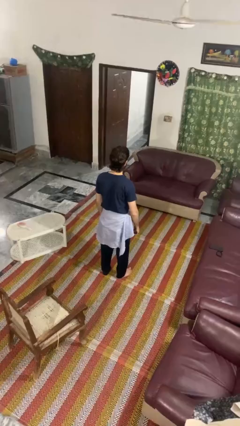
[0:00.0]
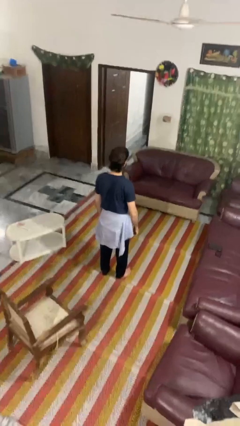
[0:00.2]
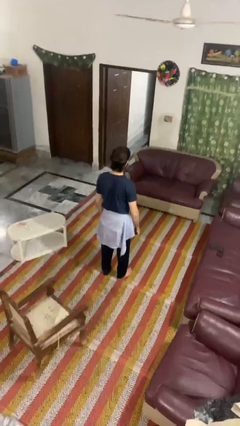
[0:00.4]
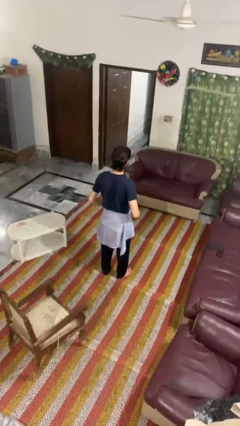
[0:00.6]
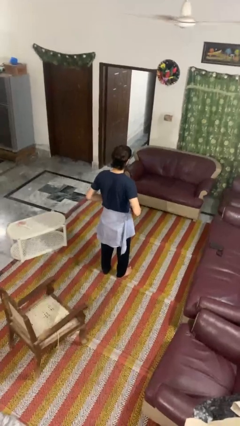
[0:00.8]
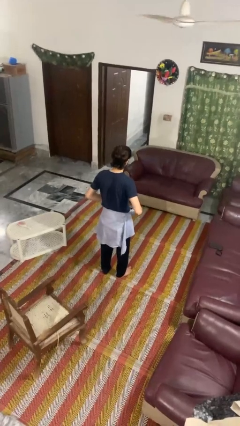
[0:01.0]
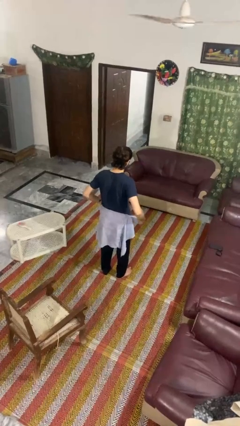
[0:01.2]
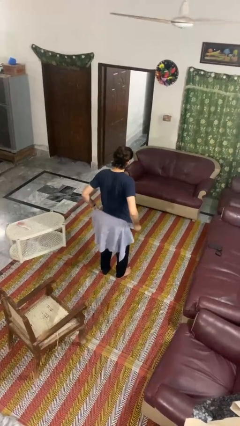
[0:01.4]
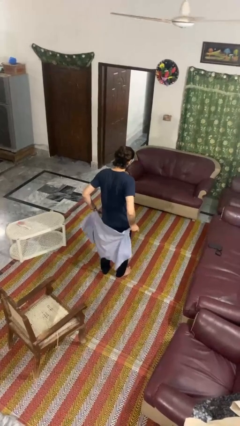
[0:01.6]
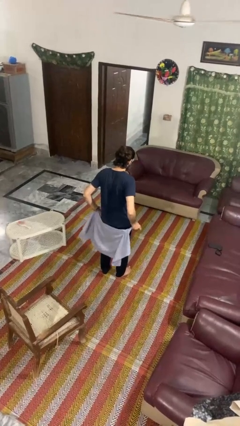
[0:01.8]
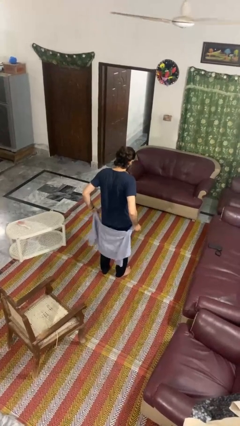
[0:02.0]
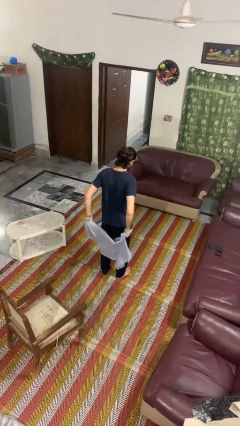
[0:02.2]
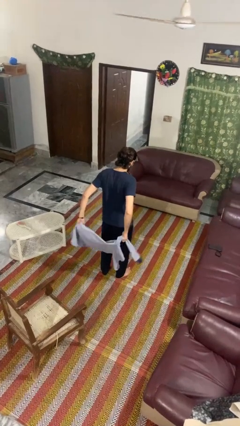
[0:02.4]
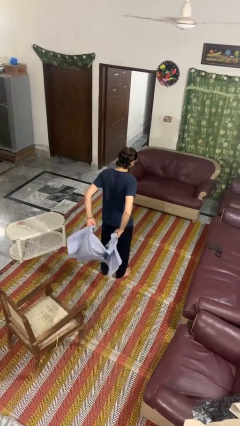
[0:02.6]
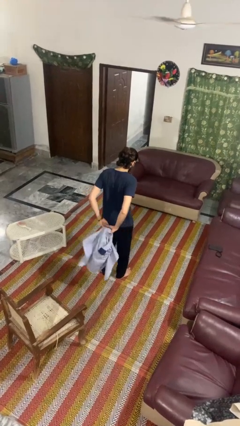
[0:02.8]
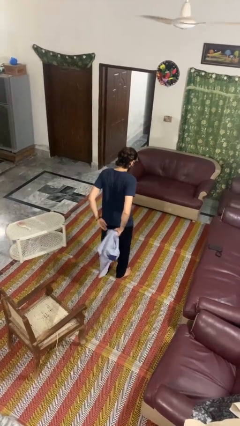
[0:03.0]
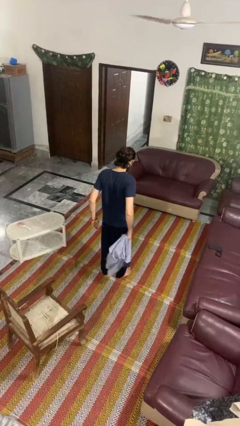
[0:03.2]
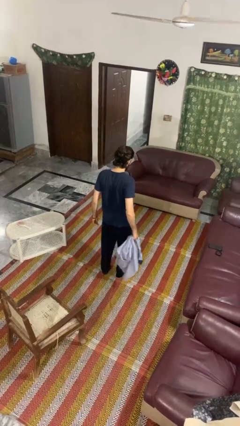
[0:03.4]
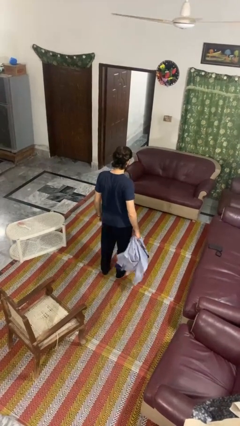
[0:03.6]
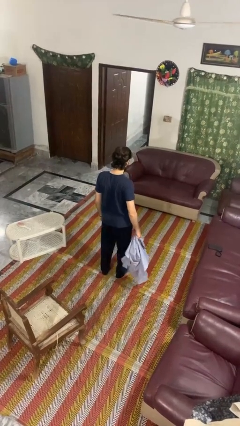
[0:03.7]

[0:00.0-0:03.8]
person unties jacket around waist

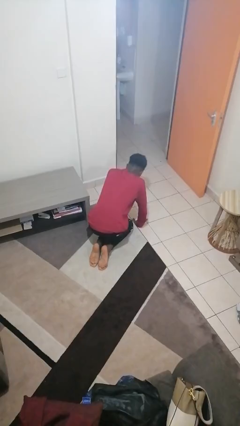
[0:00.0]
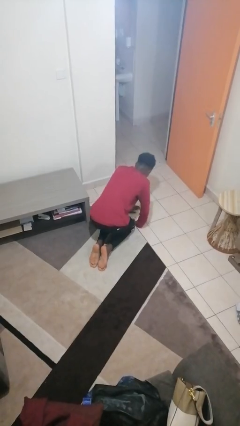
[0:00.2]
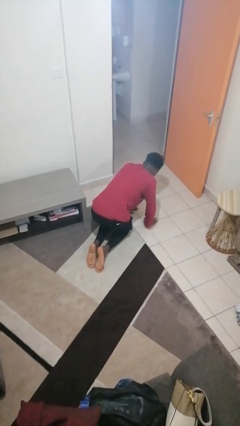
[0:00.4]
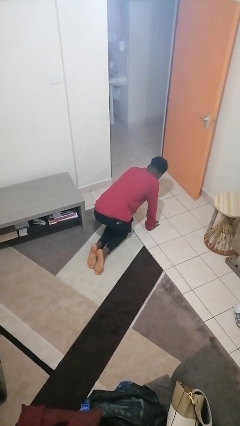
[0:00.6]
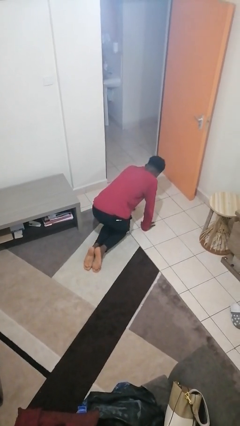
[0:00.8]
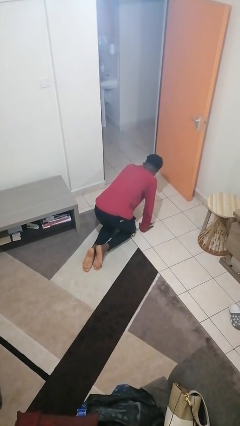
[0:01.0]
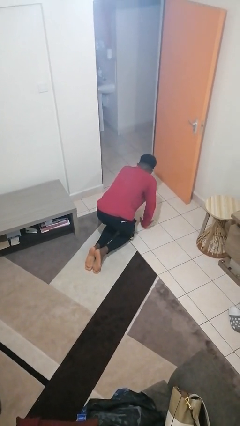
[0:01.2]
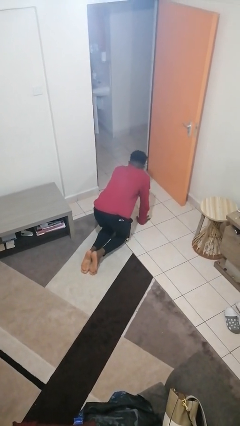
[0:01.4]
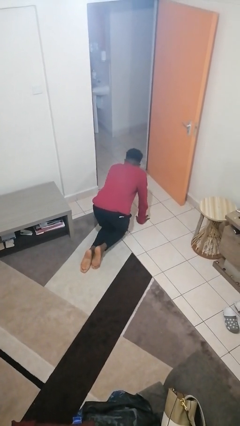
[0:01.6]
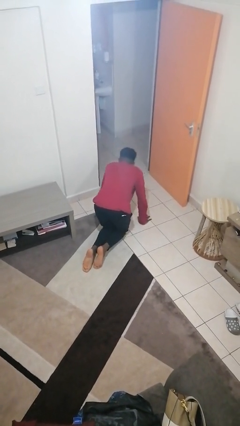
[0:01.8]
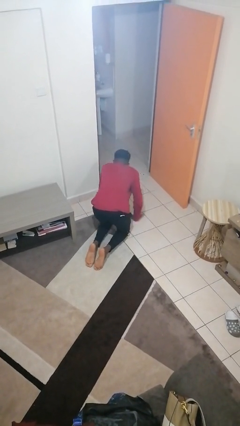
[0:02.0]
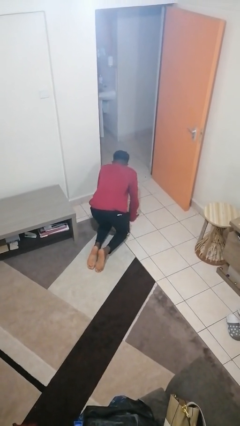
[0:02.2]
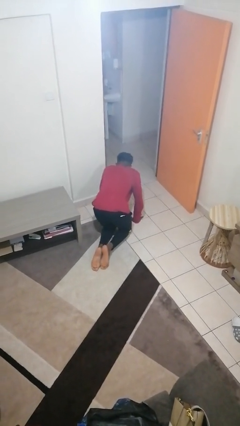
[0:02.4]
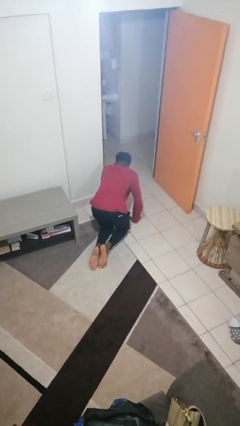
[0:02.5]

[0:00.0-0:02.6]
person crawls

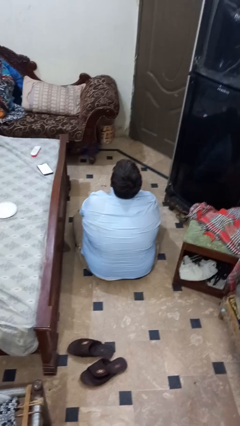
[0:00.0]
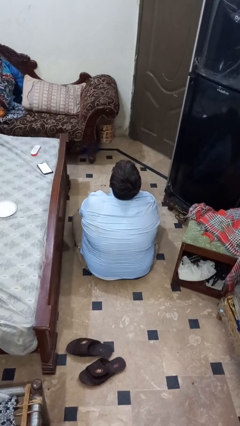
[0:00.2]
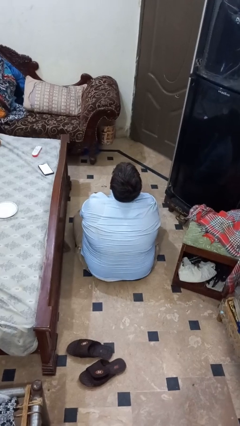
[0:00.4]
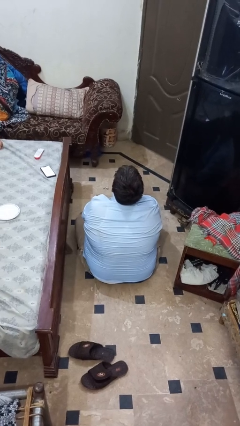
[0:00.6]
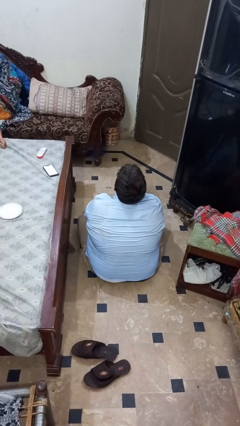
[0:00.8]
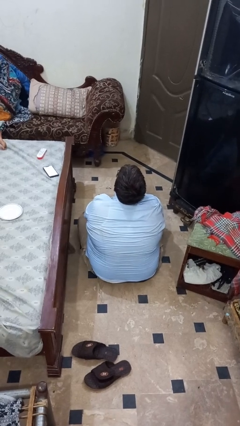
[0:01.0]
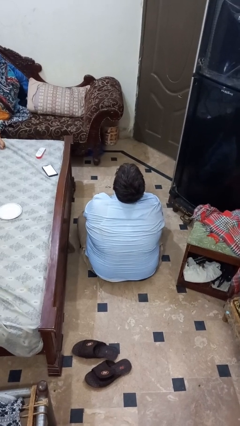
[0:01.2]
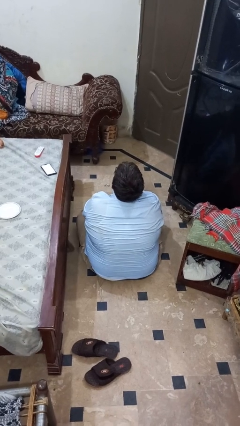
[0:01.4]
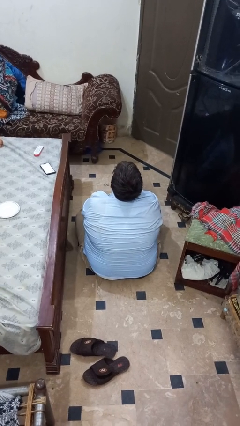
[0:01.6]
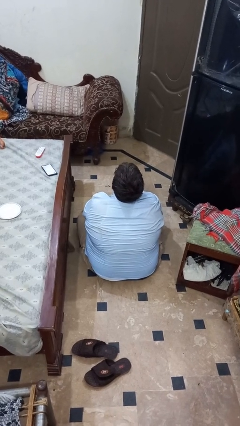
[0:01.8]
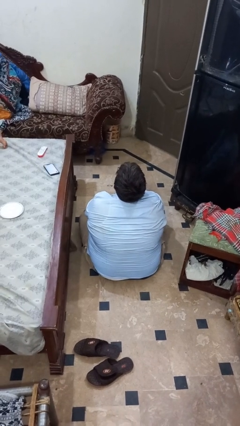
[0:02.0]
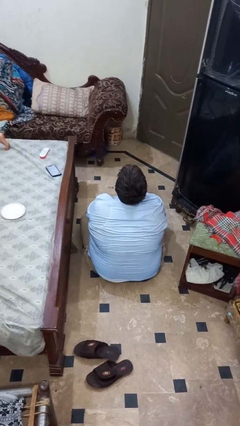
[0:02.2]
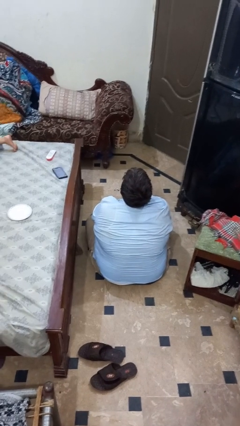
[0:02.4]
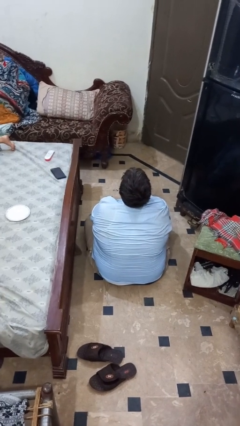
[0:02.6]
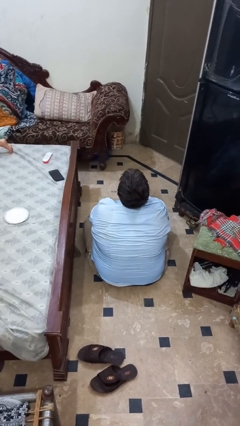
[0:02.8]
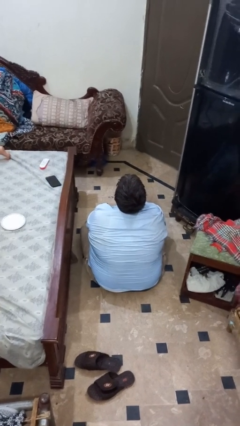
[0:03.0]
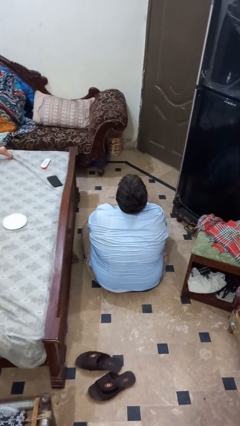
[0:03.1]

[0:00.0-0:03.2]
person sticks out tongue

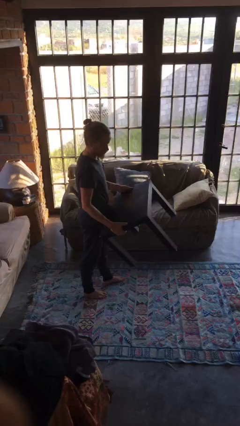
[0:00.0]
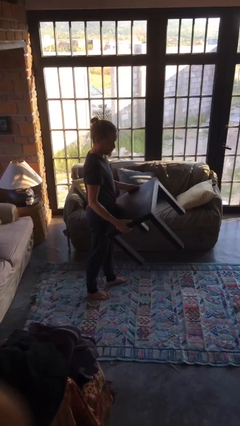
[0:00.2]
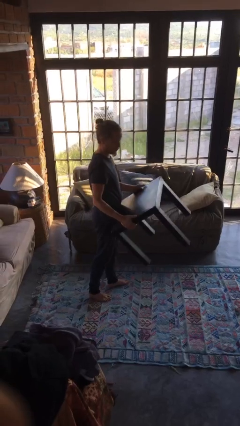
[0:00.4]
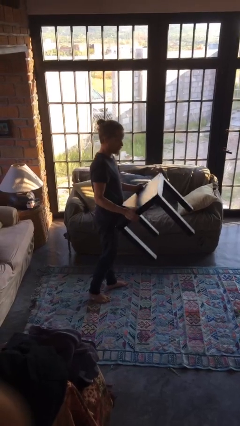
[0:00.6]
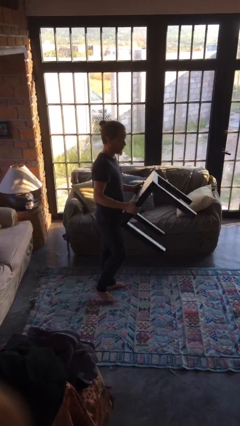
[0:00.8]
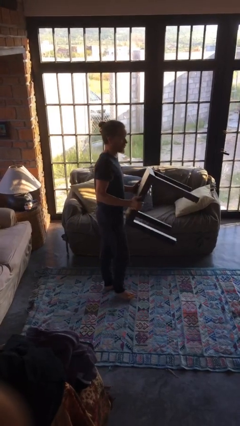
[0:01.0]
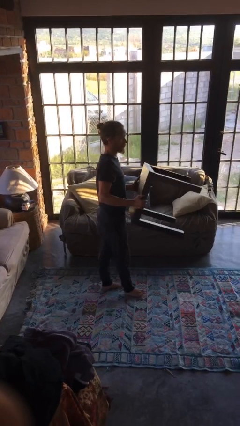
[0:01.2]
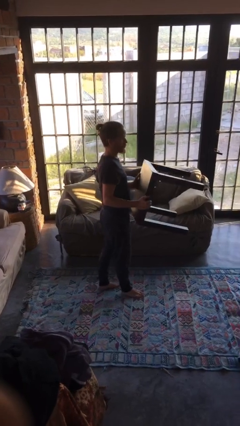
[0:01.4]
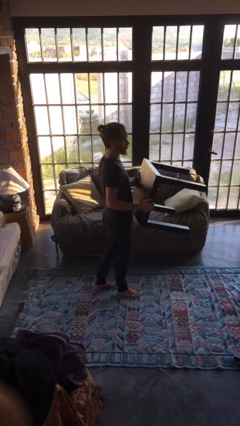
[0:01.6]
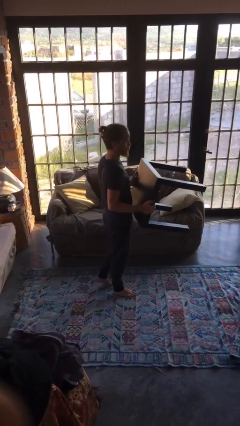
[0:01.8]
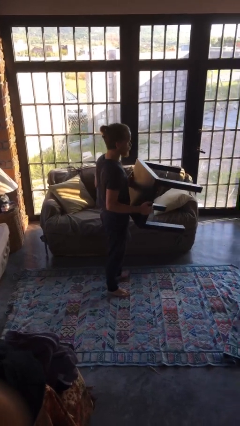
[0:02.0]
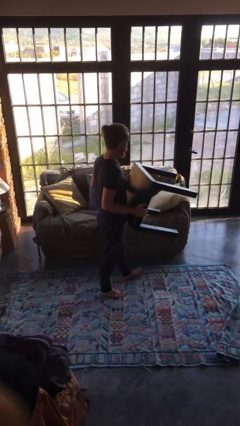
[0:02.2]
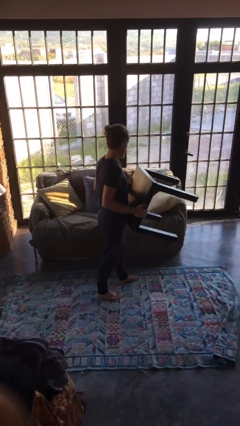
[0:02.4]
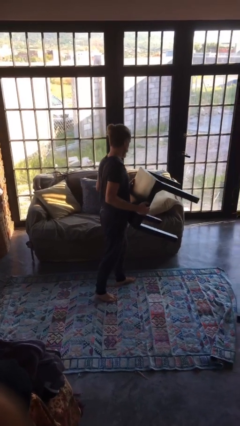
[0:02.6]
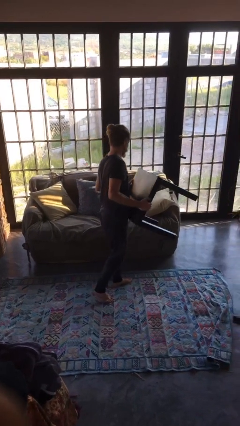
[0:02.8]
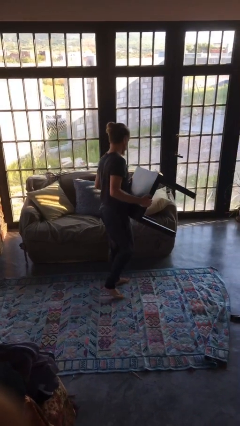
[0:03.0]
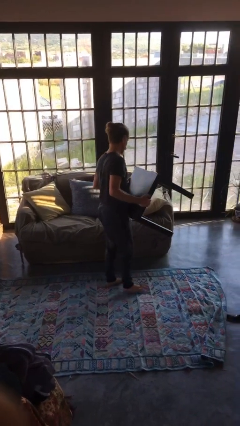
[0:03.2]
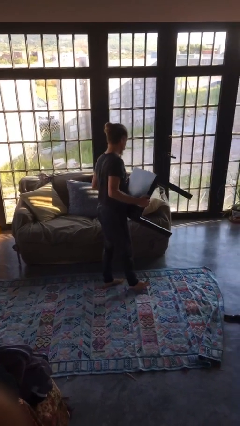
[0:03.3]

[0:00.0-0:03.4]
person carries furniture

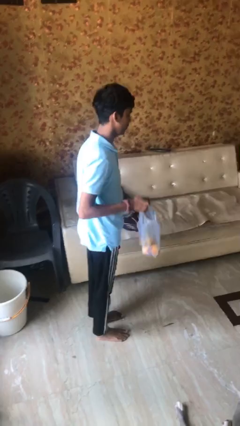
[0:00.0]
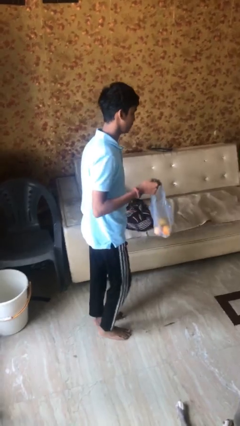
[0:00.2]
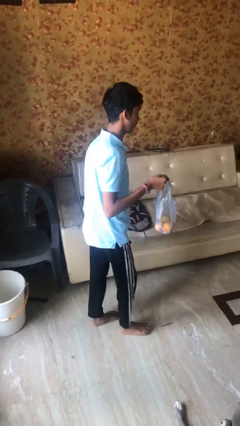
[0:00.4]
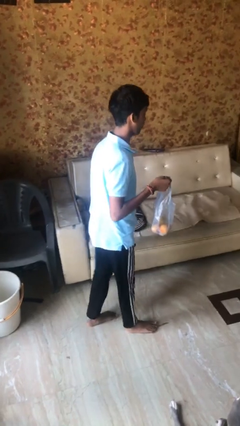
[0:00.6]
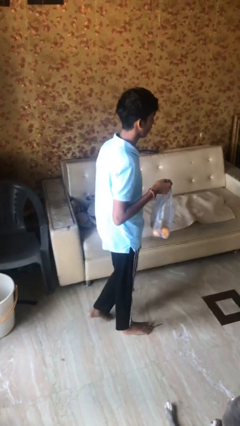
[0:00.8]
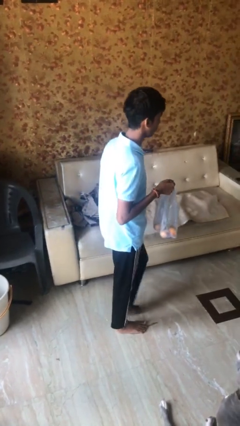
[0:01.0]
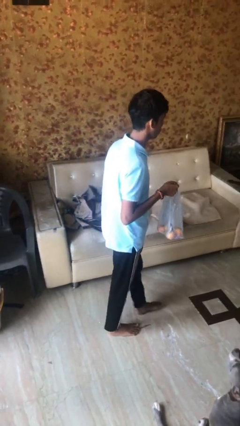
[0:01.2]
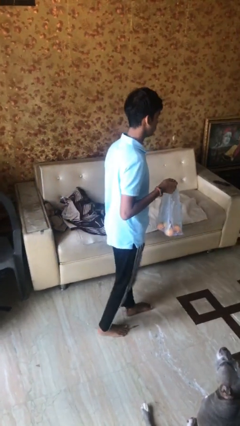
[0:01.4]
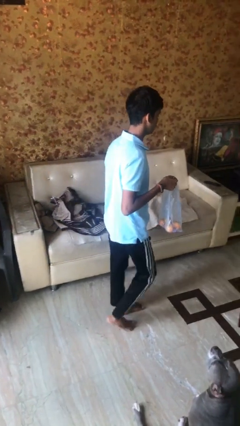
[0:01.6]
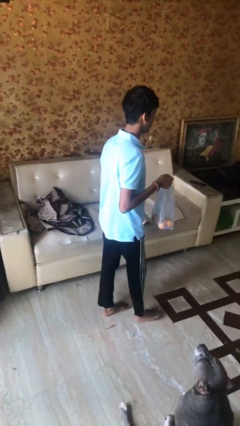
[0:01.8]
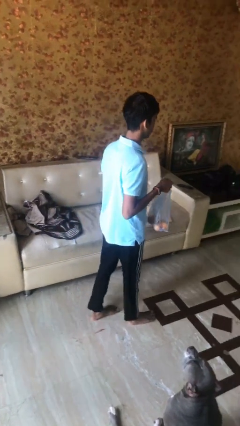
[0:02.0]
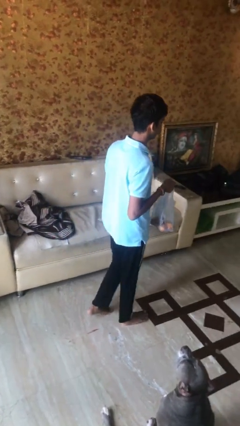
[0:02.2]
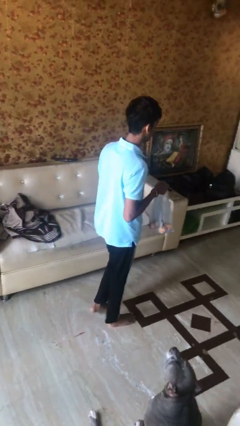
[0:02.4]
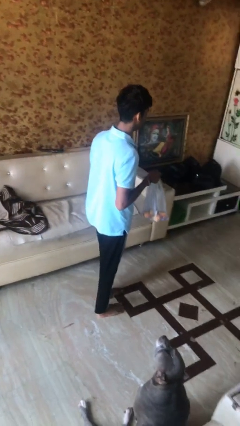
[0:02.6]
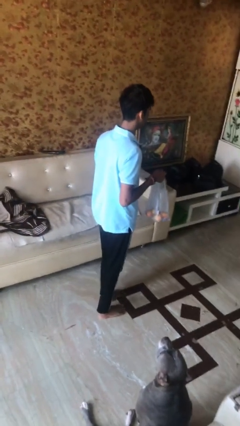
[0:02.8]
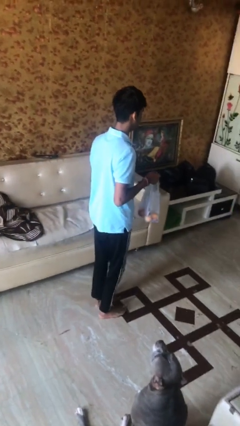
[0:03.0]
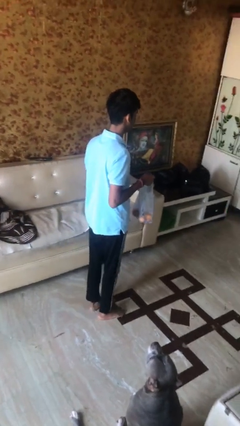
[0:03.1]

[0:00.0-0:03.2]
person carries groceries

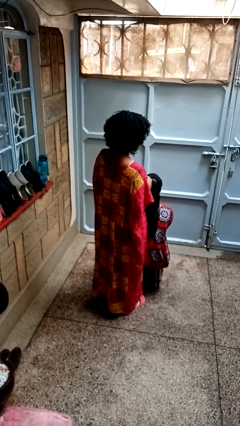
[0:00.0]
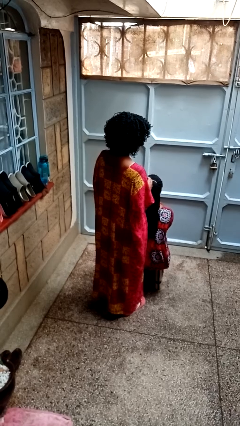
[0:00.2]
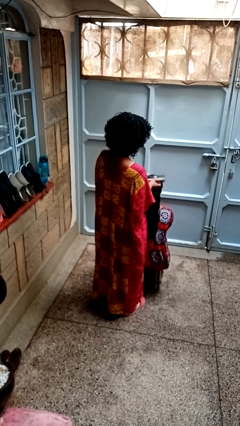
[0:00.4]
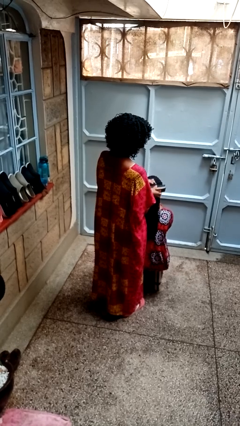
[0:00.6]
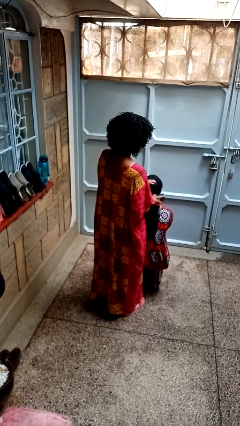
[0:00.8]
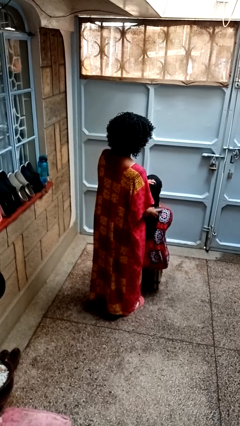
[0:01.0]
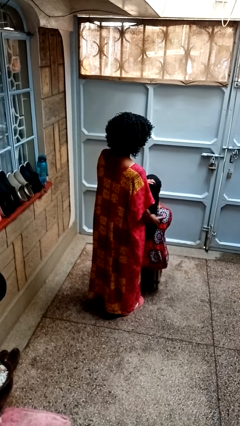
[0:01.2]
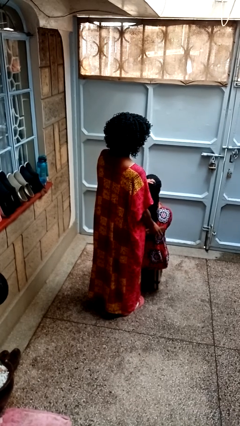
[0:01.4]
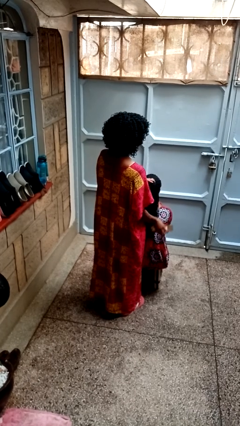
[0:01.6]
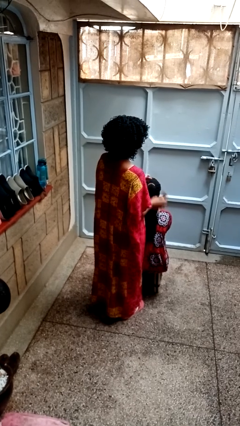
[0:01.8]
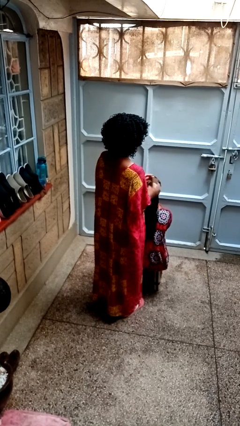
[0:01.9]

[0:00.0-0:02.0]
person brushes hair of person
